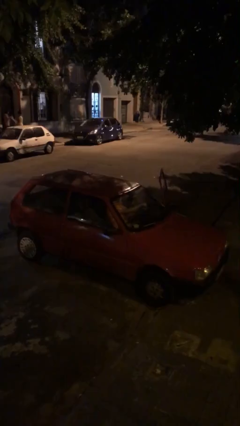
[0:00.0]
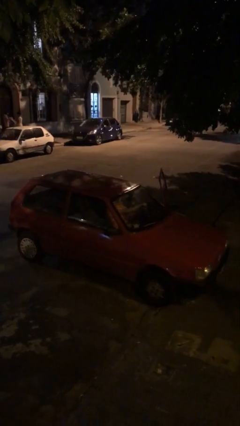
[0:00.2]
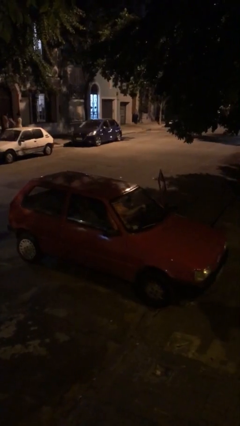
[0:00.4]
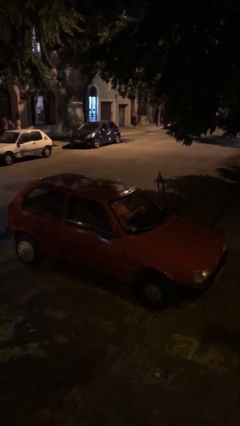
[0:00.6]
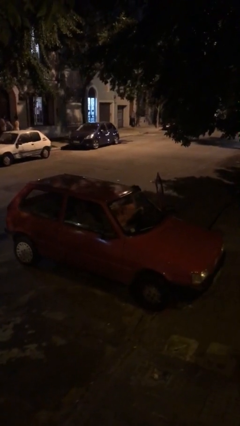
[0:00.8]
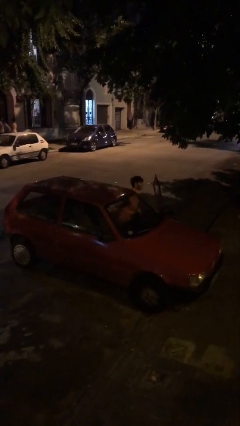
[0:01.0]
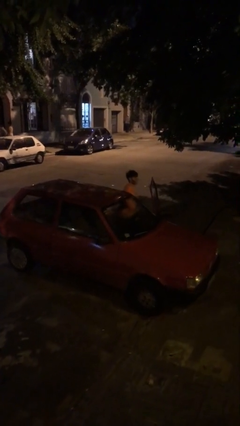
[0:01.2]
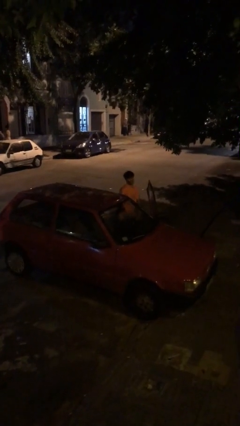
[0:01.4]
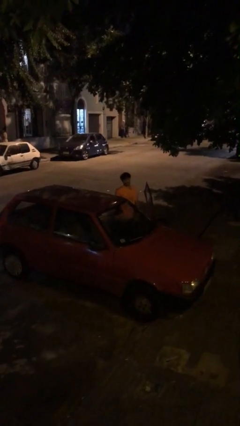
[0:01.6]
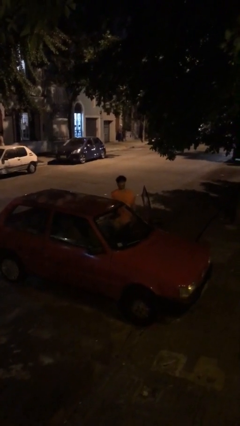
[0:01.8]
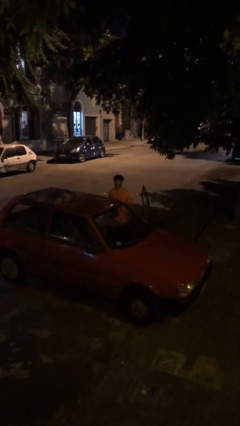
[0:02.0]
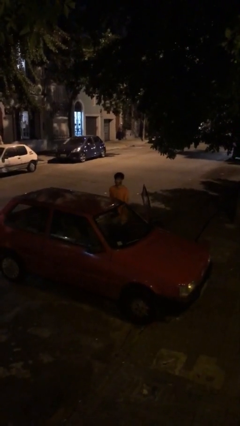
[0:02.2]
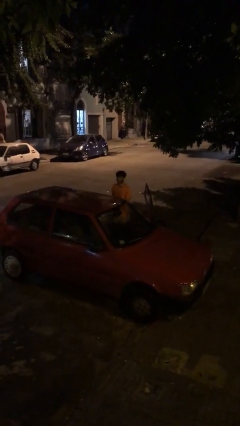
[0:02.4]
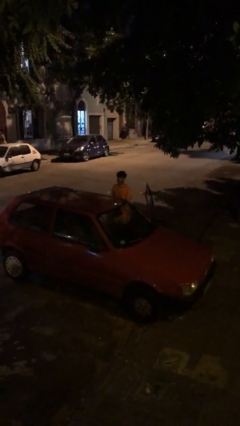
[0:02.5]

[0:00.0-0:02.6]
person exits car

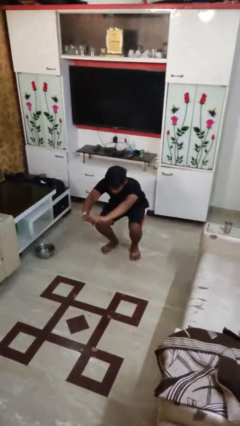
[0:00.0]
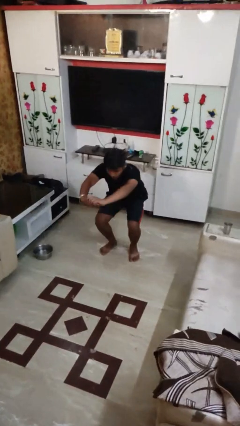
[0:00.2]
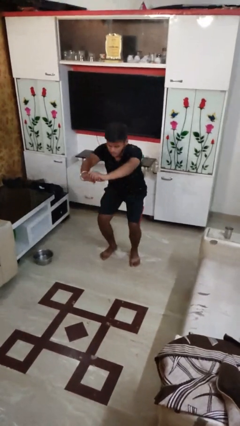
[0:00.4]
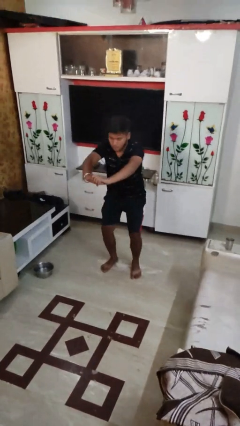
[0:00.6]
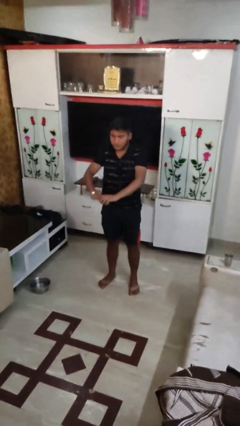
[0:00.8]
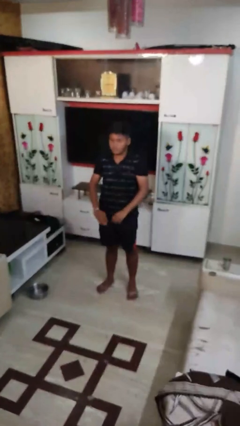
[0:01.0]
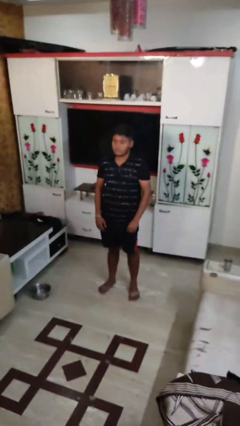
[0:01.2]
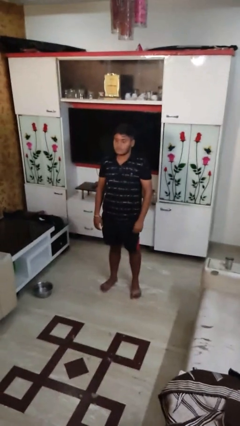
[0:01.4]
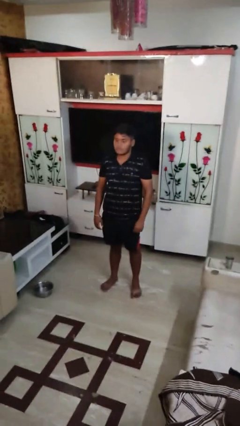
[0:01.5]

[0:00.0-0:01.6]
person stands up

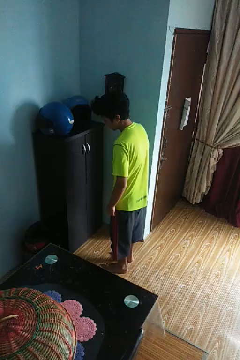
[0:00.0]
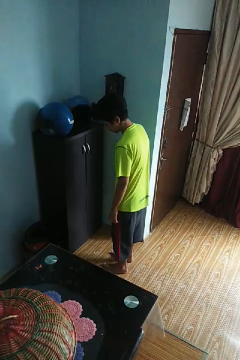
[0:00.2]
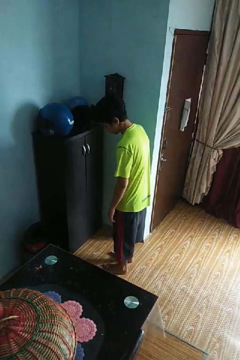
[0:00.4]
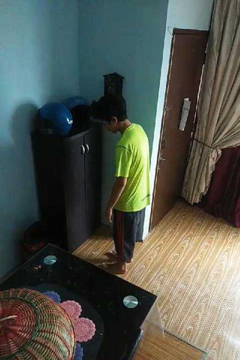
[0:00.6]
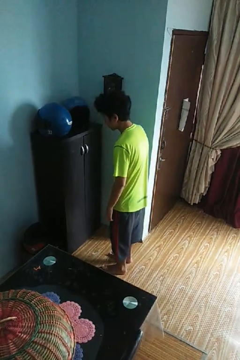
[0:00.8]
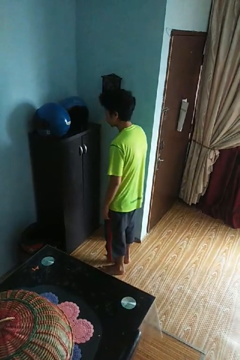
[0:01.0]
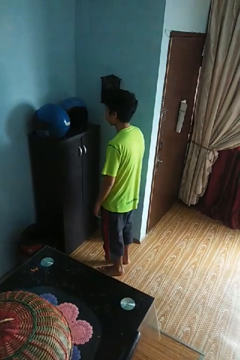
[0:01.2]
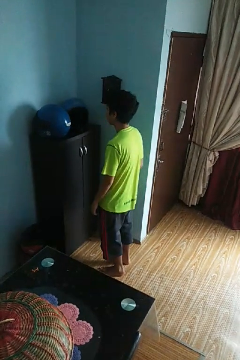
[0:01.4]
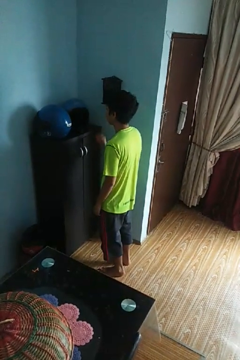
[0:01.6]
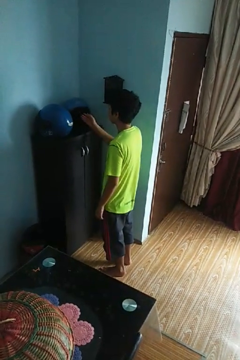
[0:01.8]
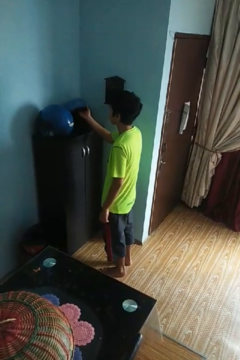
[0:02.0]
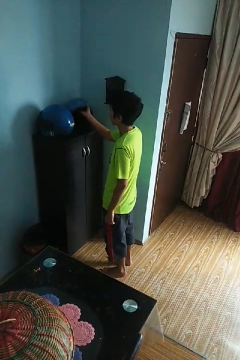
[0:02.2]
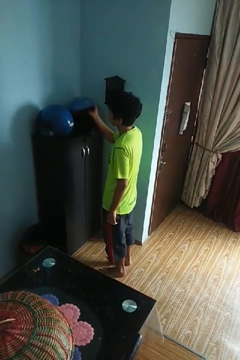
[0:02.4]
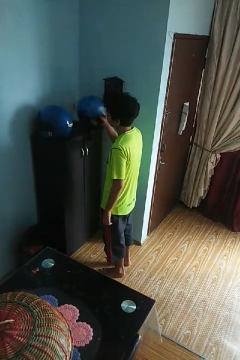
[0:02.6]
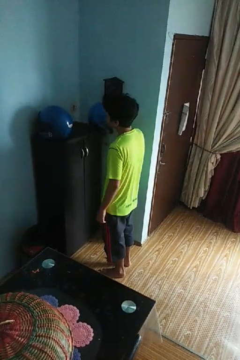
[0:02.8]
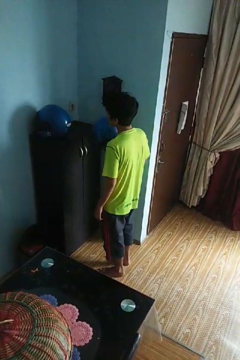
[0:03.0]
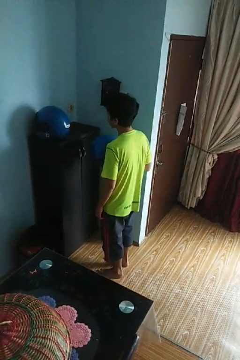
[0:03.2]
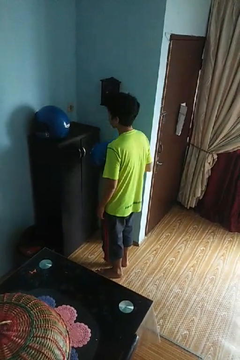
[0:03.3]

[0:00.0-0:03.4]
person picks up object from countertop

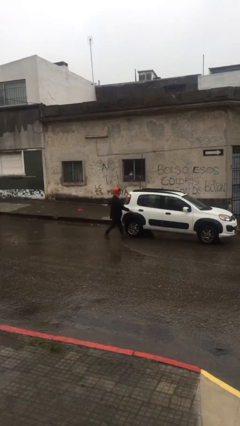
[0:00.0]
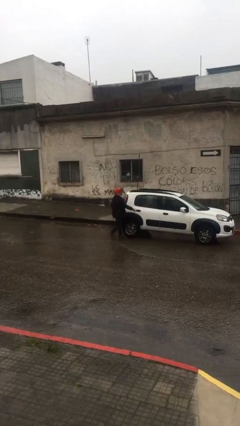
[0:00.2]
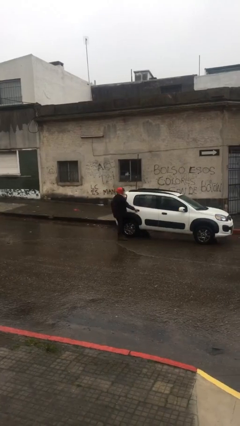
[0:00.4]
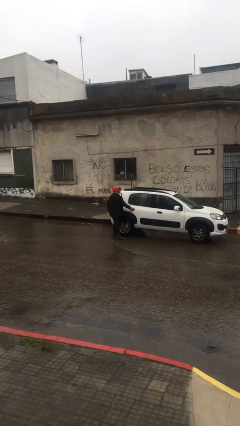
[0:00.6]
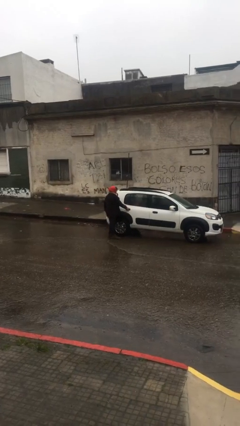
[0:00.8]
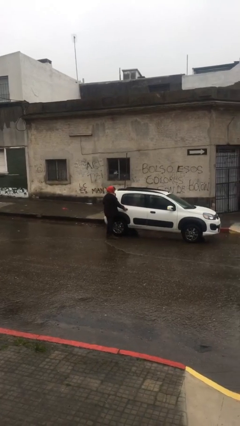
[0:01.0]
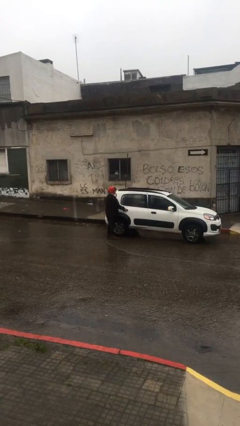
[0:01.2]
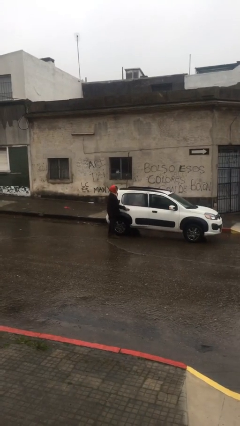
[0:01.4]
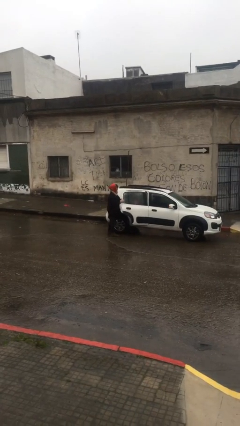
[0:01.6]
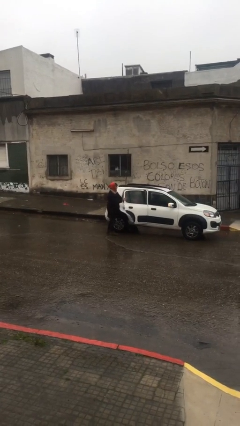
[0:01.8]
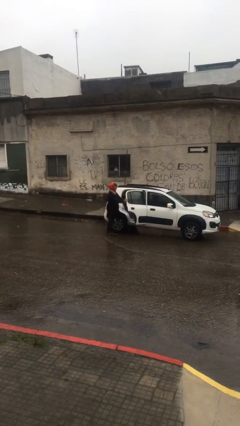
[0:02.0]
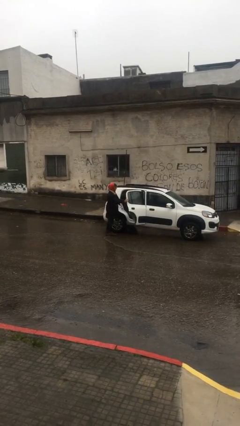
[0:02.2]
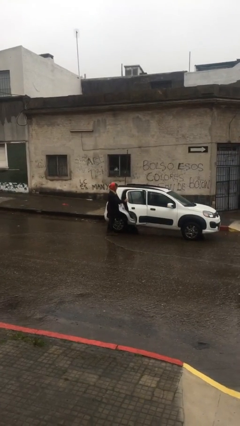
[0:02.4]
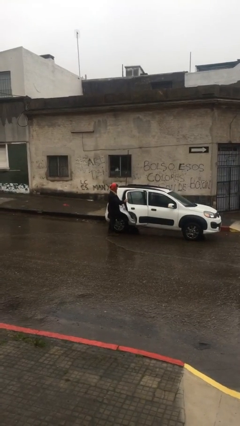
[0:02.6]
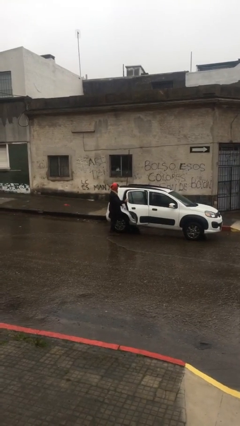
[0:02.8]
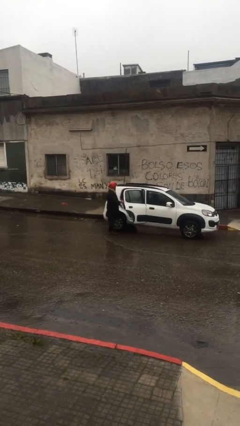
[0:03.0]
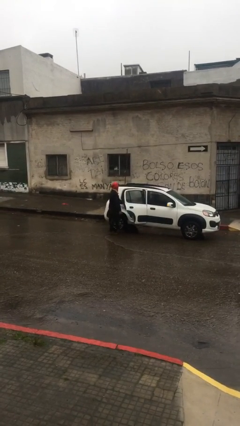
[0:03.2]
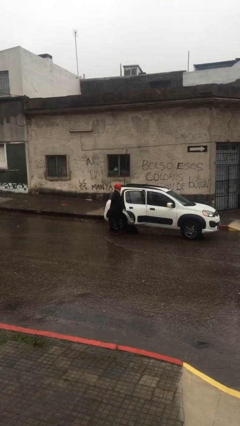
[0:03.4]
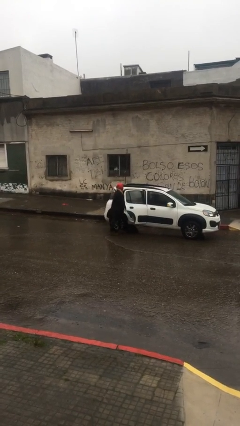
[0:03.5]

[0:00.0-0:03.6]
person opens car door

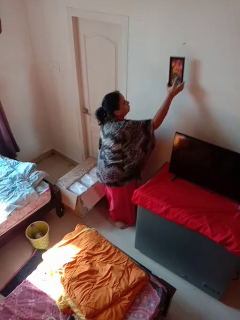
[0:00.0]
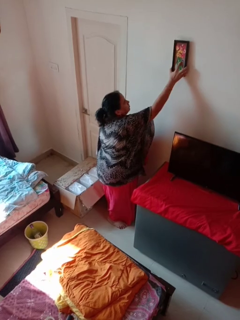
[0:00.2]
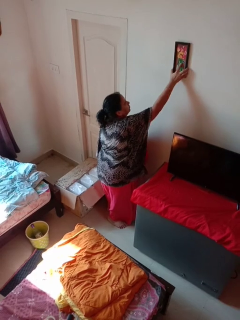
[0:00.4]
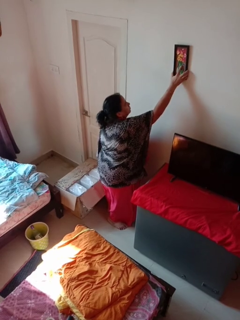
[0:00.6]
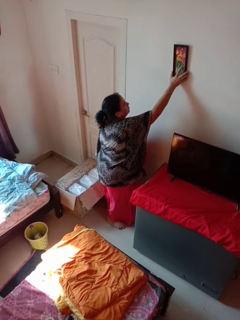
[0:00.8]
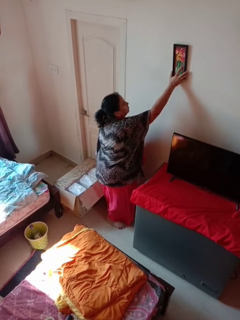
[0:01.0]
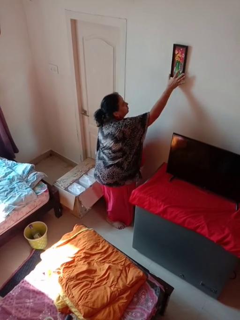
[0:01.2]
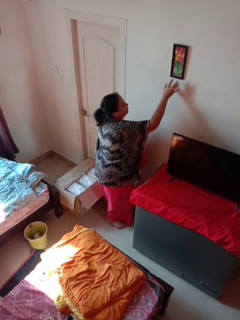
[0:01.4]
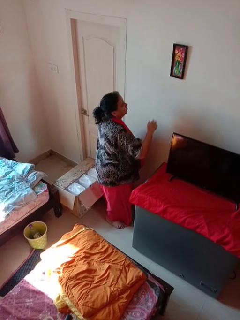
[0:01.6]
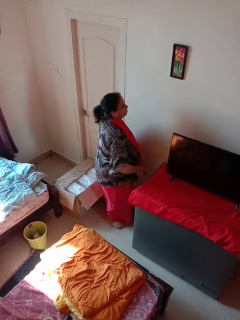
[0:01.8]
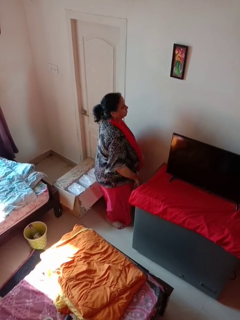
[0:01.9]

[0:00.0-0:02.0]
person puts up picture frame

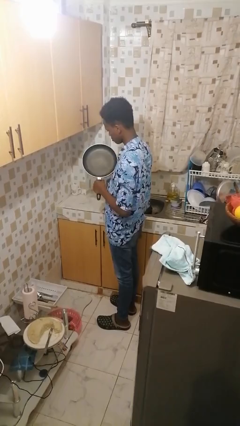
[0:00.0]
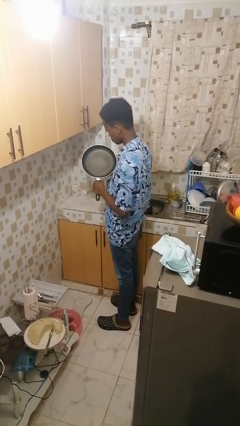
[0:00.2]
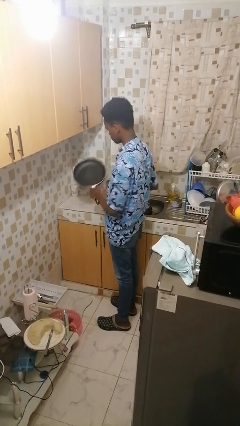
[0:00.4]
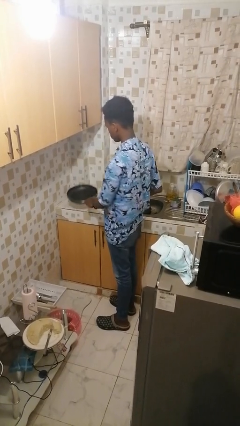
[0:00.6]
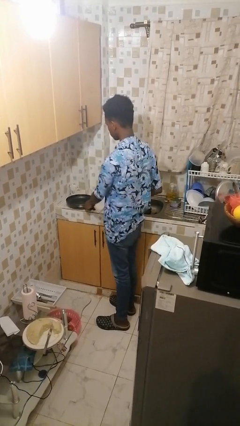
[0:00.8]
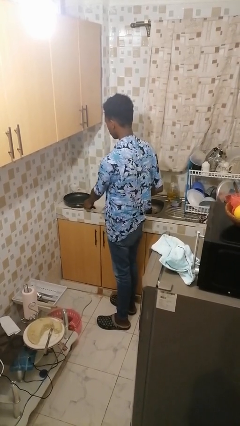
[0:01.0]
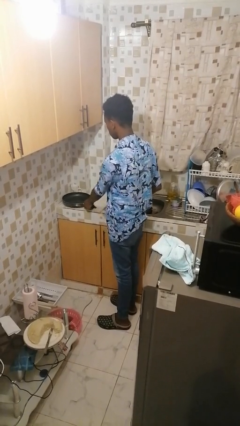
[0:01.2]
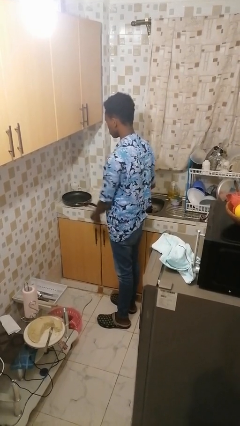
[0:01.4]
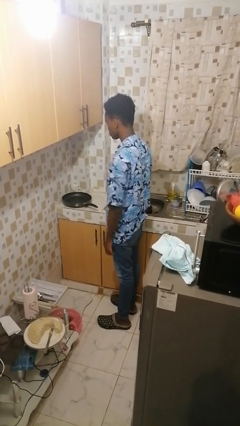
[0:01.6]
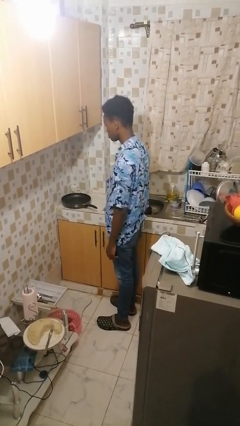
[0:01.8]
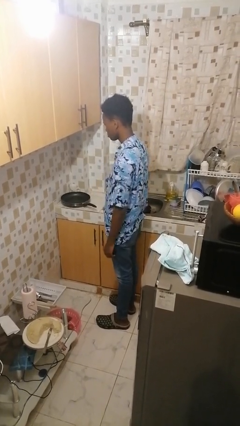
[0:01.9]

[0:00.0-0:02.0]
person puts down object on countertop

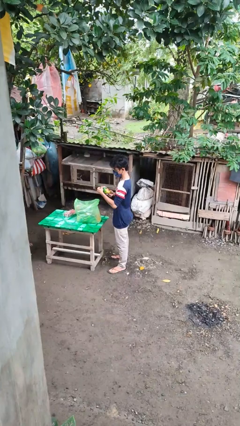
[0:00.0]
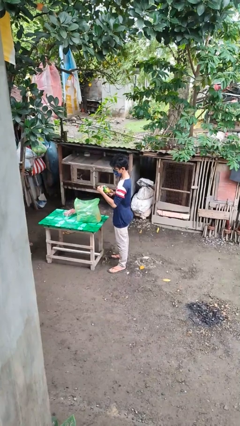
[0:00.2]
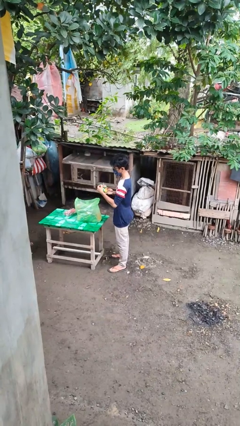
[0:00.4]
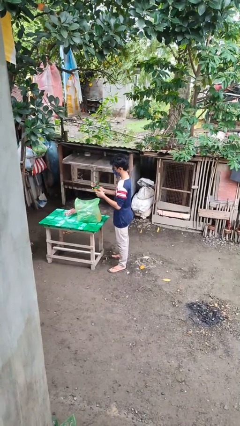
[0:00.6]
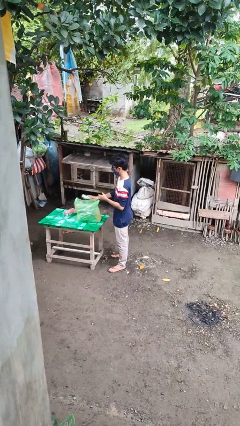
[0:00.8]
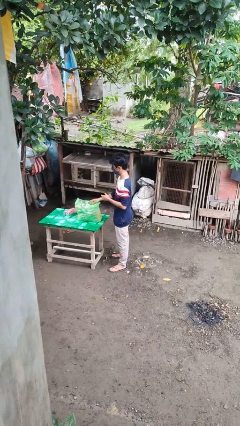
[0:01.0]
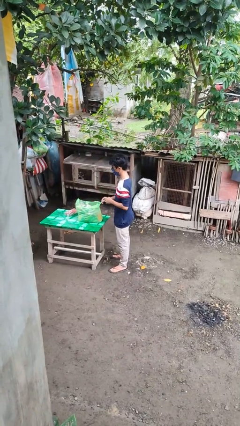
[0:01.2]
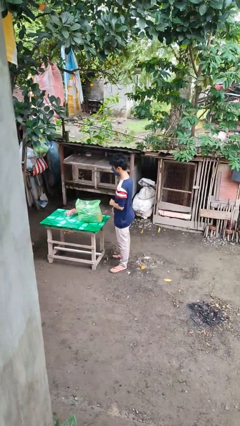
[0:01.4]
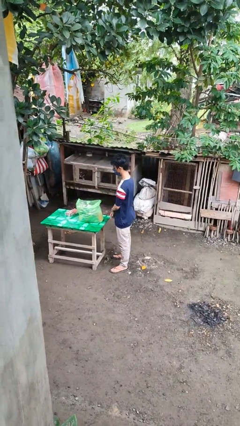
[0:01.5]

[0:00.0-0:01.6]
person puts object into bag

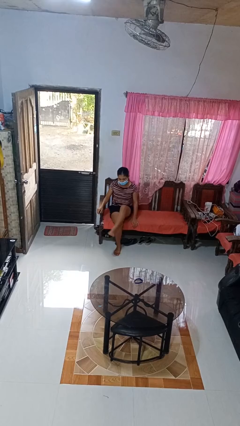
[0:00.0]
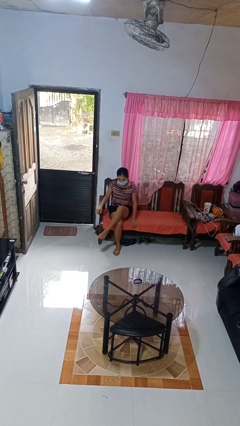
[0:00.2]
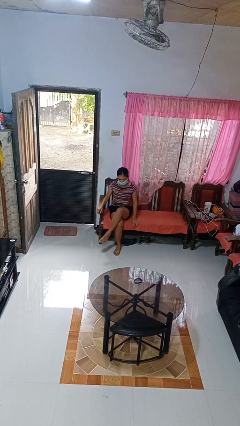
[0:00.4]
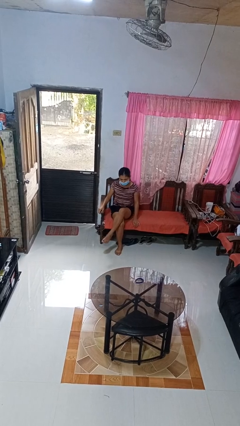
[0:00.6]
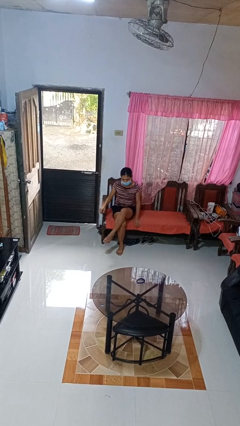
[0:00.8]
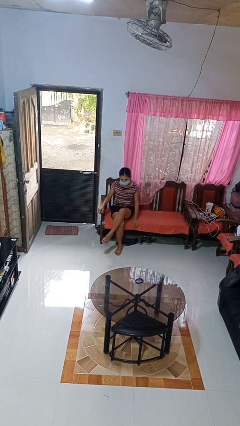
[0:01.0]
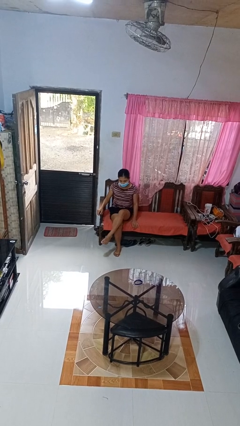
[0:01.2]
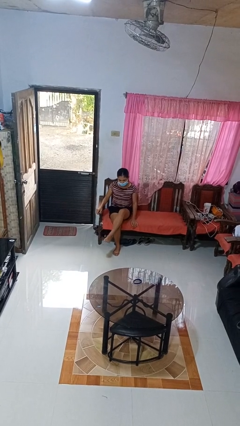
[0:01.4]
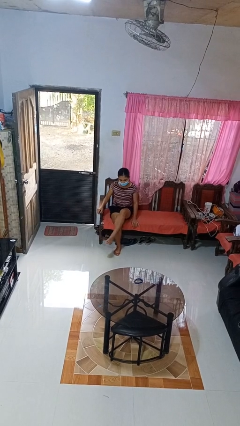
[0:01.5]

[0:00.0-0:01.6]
person crosses legs
